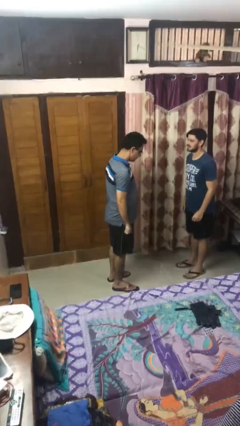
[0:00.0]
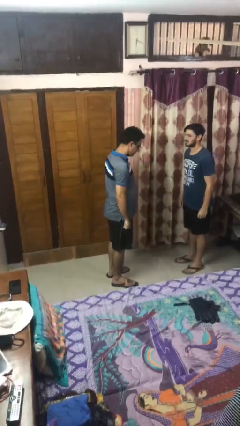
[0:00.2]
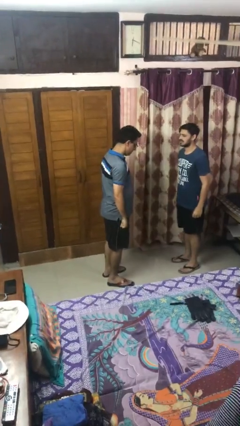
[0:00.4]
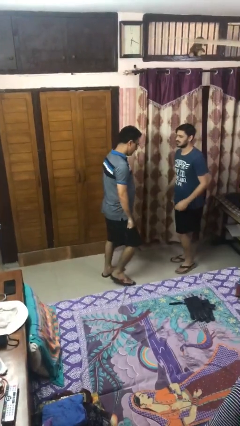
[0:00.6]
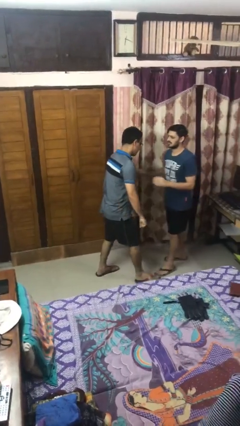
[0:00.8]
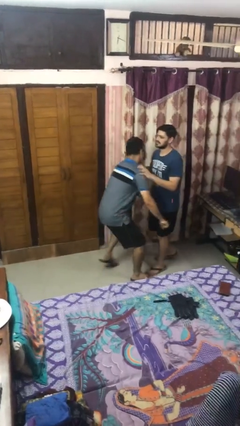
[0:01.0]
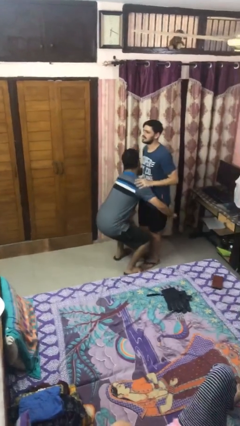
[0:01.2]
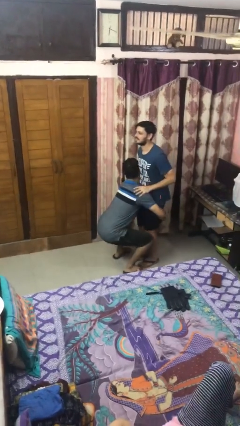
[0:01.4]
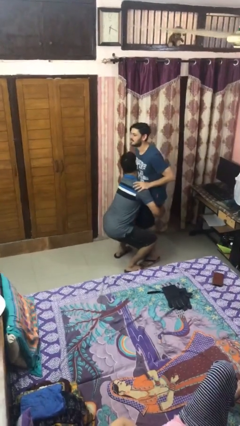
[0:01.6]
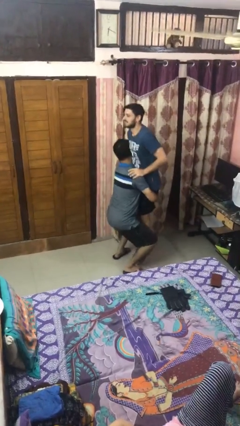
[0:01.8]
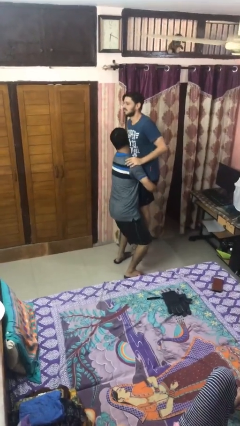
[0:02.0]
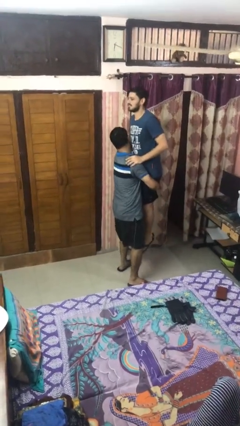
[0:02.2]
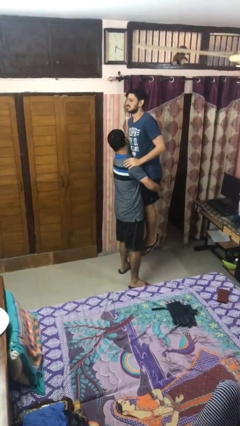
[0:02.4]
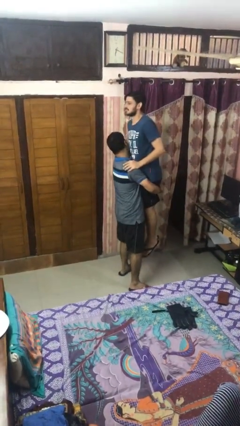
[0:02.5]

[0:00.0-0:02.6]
person picks up person

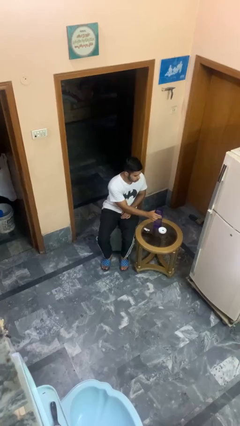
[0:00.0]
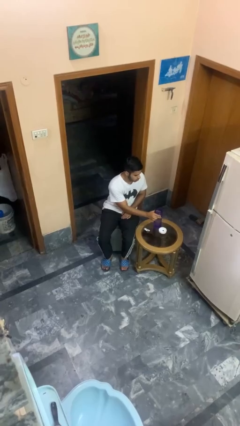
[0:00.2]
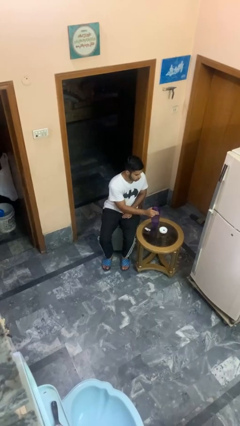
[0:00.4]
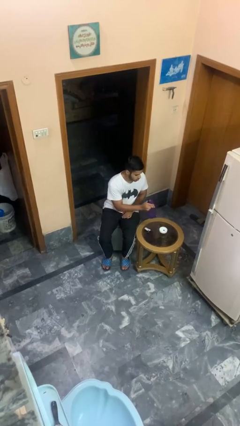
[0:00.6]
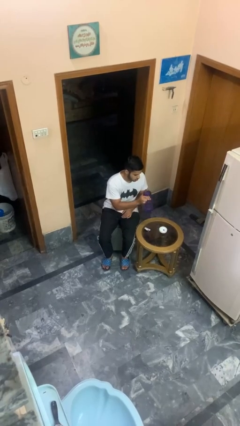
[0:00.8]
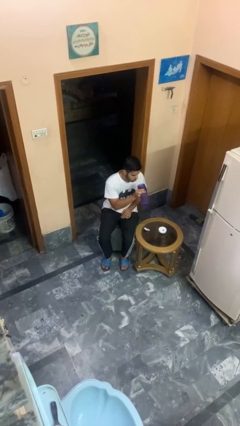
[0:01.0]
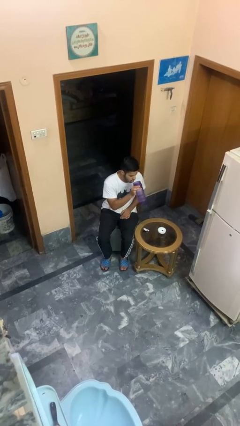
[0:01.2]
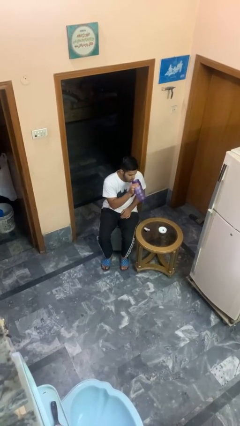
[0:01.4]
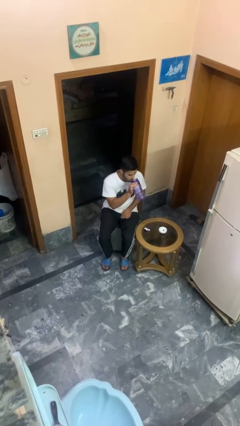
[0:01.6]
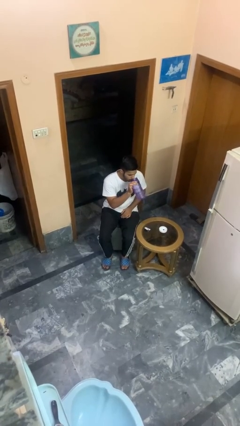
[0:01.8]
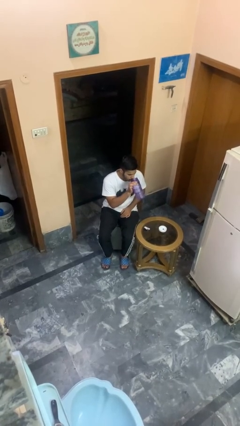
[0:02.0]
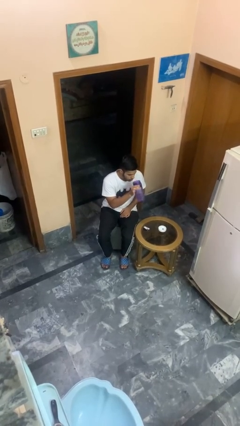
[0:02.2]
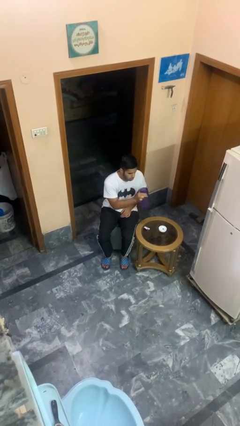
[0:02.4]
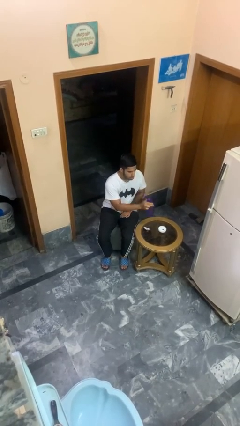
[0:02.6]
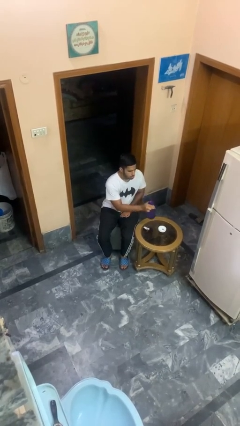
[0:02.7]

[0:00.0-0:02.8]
person drinks from cup

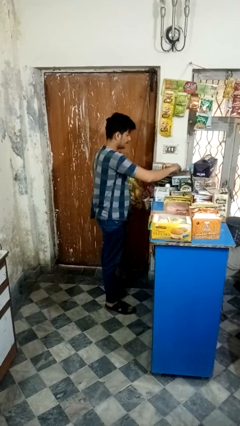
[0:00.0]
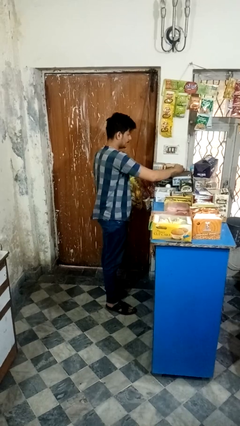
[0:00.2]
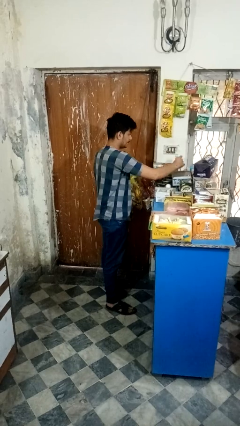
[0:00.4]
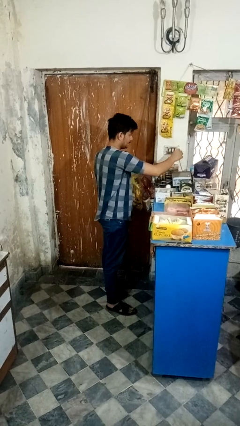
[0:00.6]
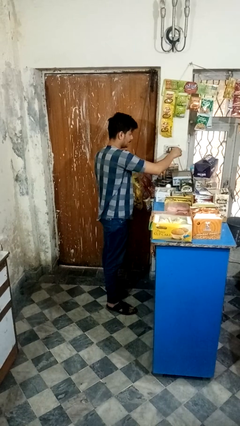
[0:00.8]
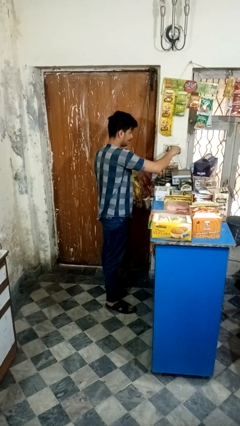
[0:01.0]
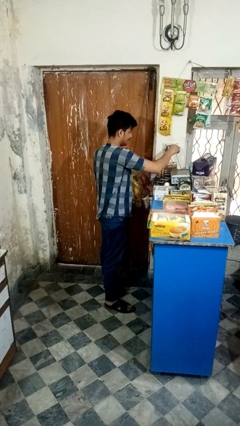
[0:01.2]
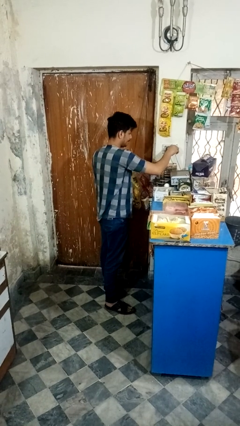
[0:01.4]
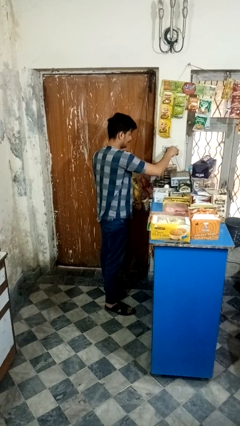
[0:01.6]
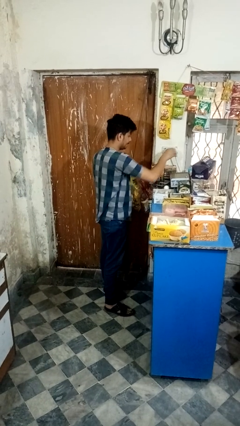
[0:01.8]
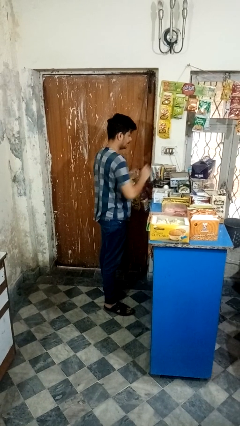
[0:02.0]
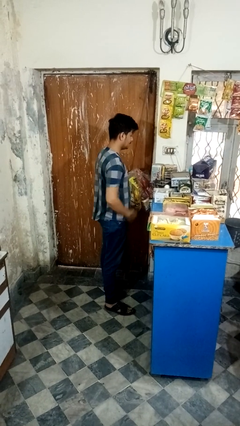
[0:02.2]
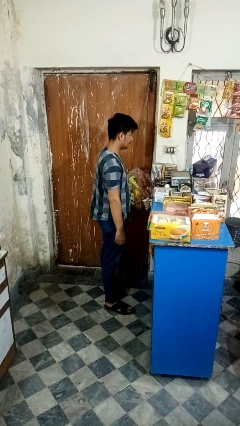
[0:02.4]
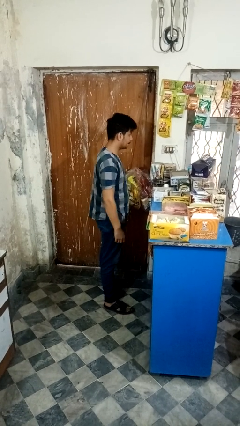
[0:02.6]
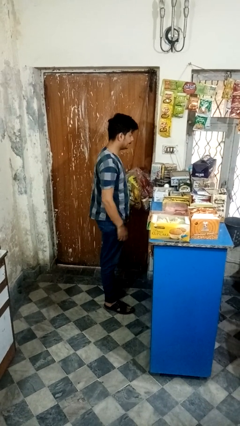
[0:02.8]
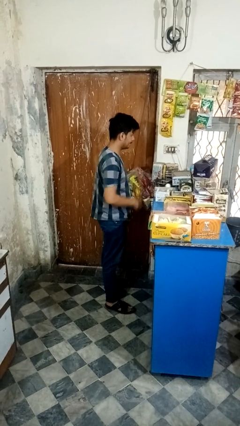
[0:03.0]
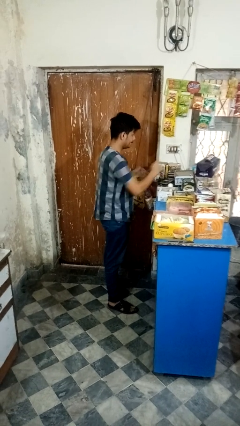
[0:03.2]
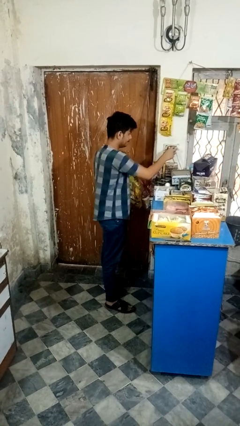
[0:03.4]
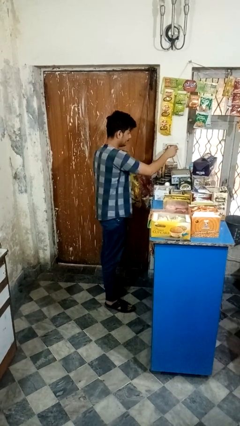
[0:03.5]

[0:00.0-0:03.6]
person plugs into electrical socket

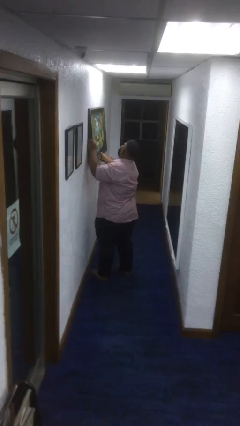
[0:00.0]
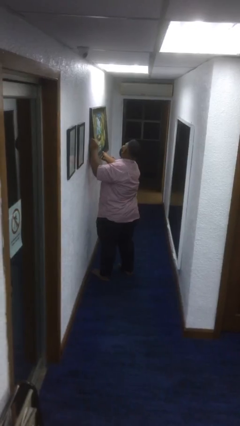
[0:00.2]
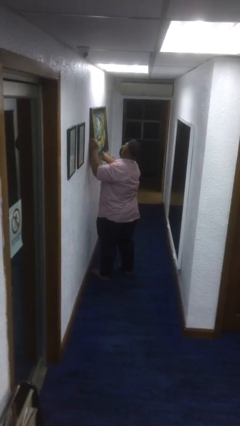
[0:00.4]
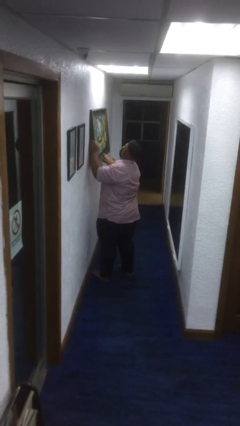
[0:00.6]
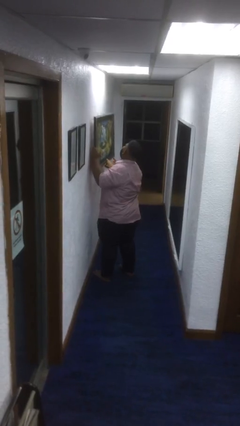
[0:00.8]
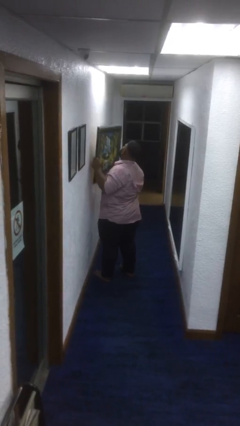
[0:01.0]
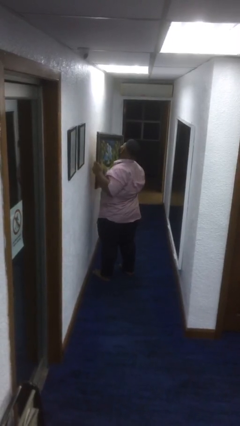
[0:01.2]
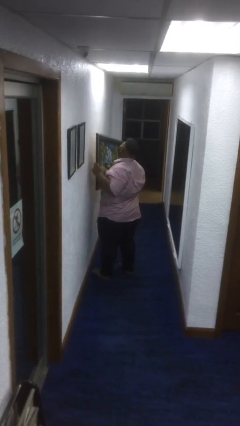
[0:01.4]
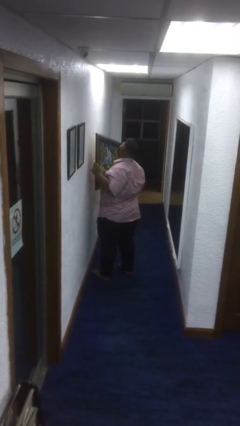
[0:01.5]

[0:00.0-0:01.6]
person takes down picture frame

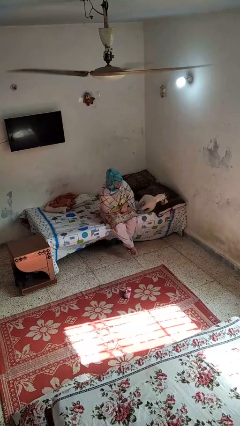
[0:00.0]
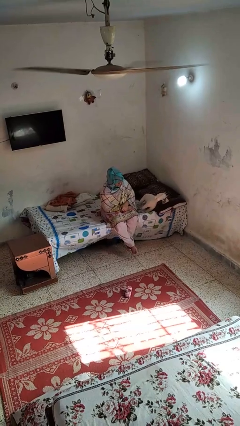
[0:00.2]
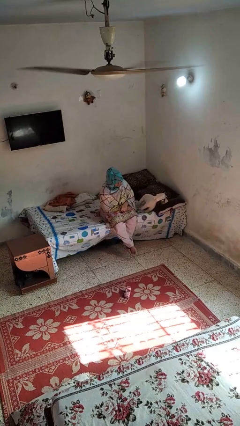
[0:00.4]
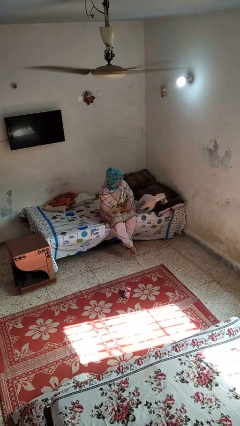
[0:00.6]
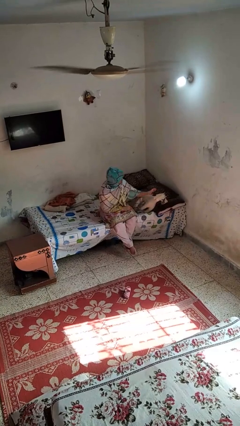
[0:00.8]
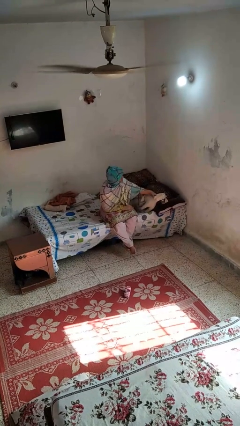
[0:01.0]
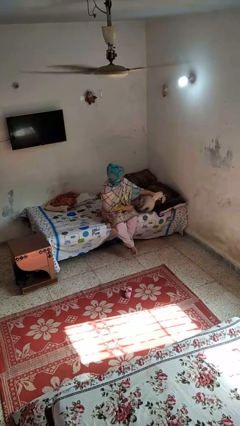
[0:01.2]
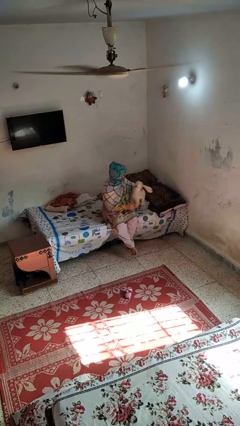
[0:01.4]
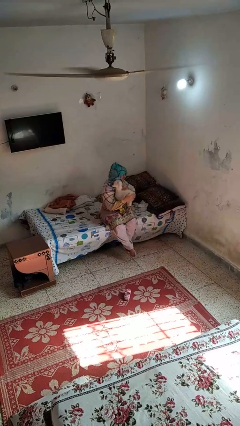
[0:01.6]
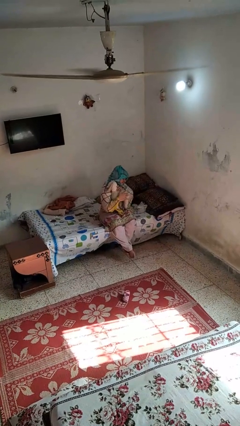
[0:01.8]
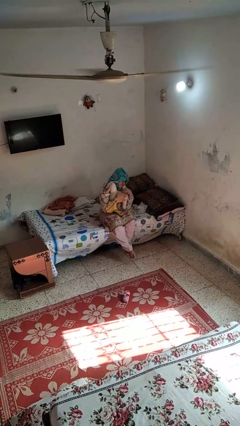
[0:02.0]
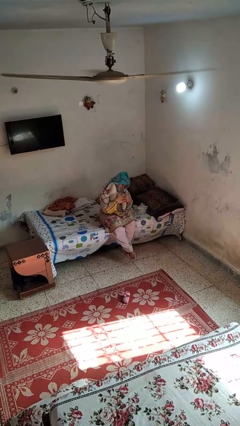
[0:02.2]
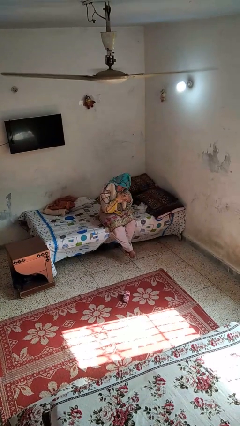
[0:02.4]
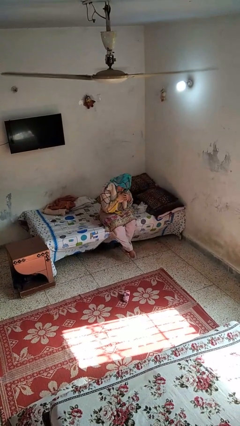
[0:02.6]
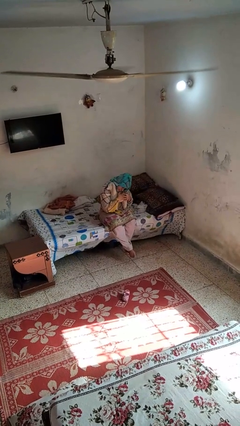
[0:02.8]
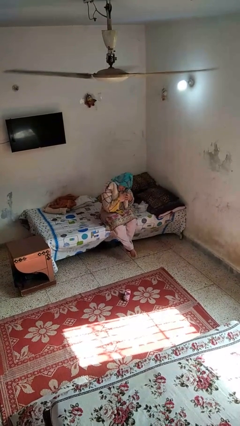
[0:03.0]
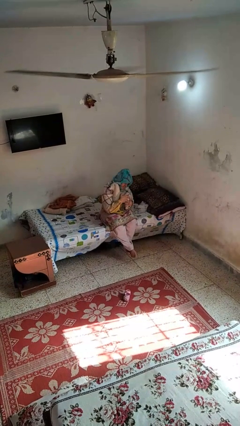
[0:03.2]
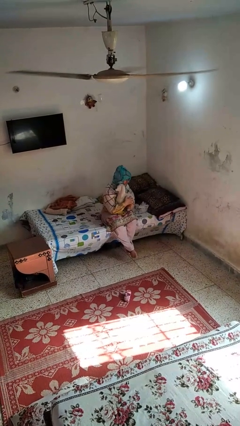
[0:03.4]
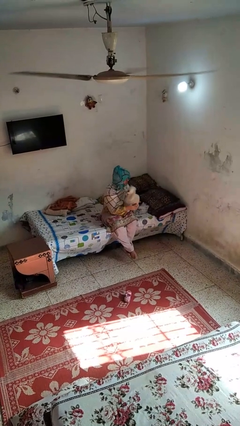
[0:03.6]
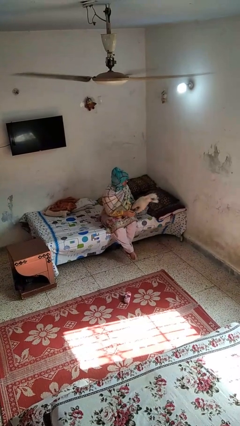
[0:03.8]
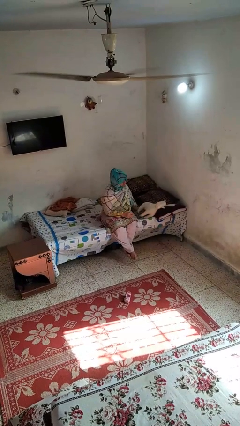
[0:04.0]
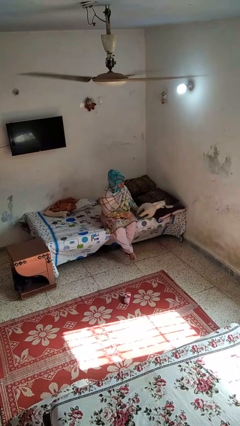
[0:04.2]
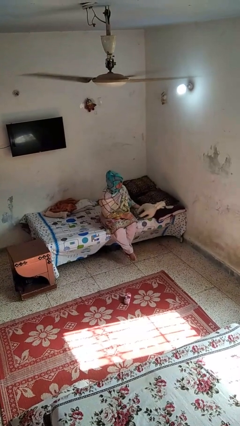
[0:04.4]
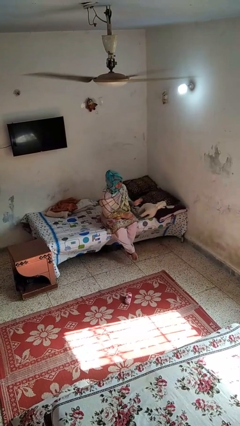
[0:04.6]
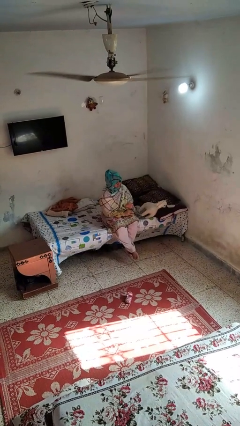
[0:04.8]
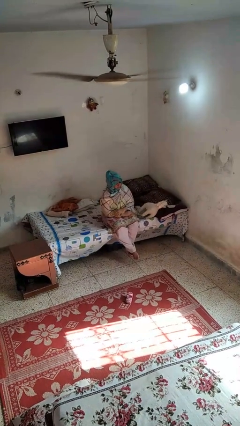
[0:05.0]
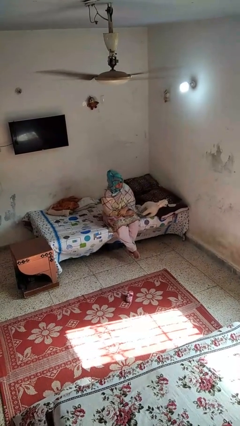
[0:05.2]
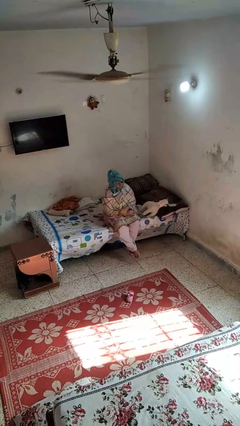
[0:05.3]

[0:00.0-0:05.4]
person hugs stuffed animal

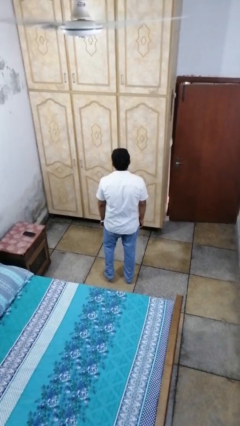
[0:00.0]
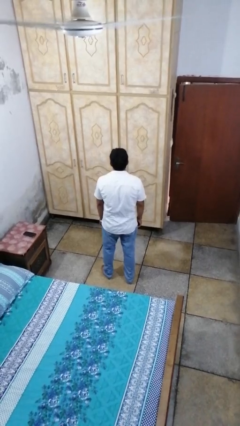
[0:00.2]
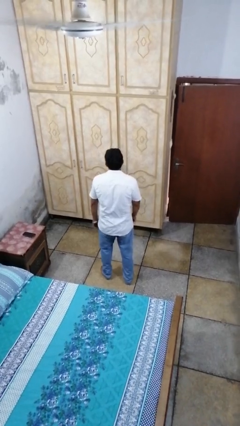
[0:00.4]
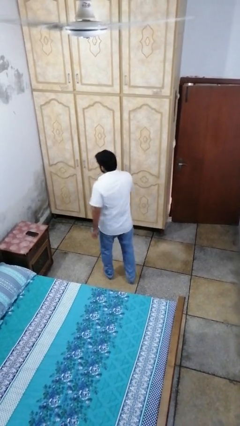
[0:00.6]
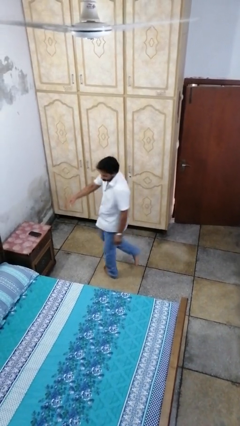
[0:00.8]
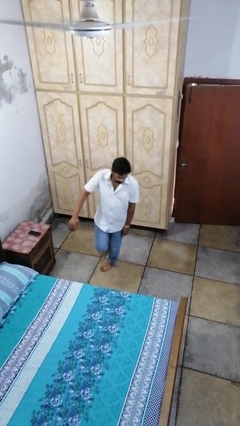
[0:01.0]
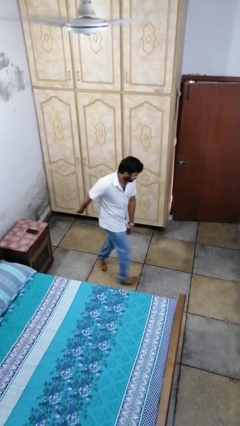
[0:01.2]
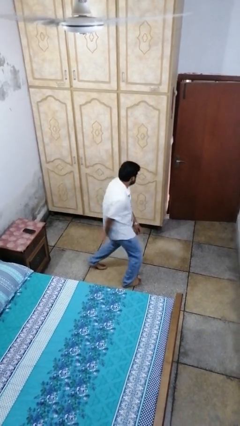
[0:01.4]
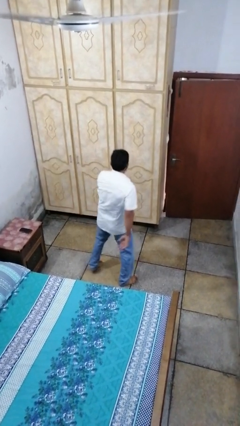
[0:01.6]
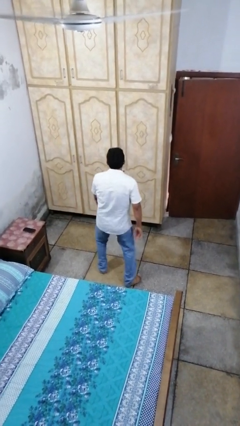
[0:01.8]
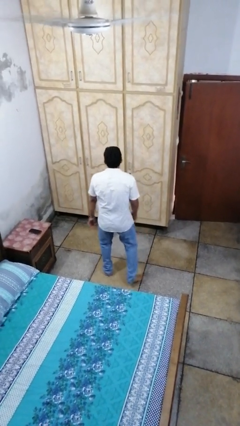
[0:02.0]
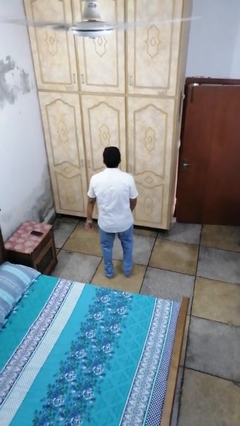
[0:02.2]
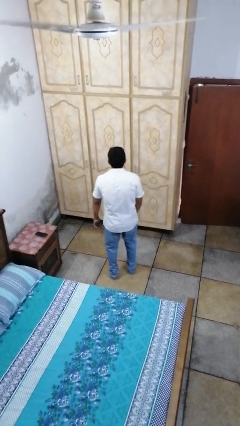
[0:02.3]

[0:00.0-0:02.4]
person twirls
